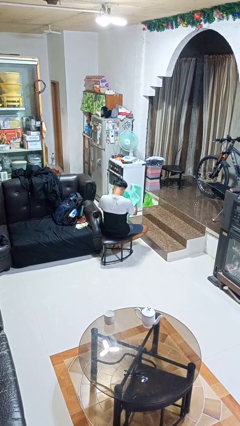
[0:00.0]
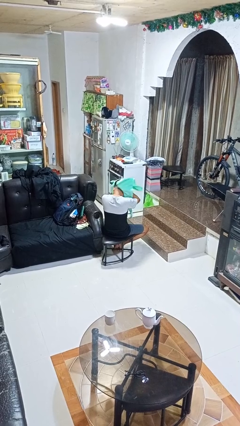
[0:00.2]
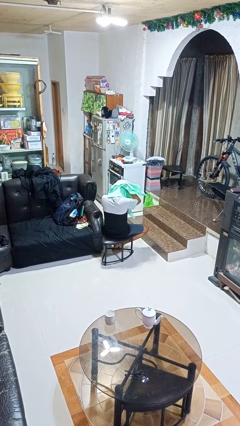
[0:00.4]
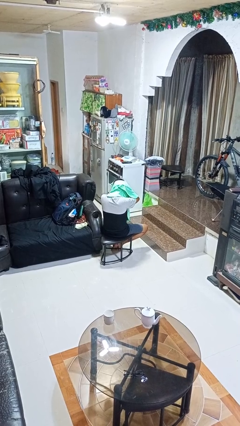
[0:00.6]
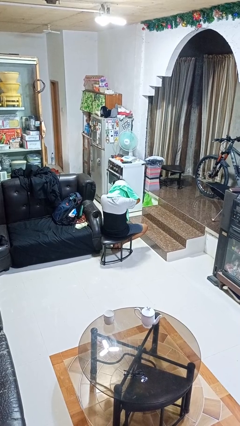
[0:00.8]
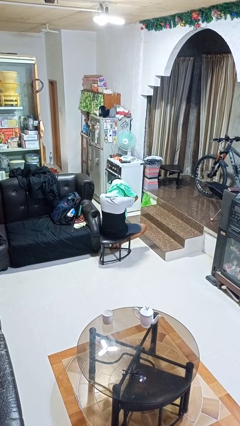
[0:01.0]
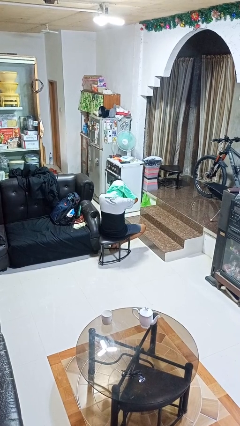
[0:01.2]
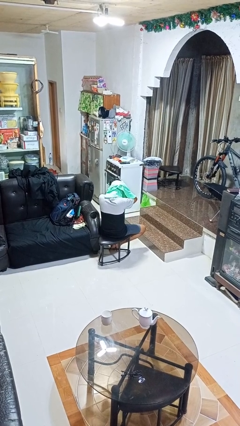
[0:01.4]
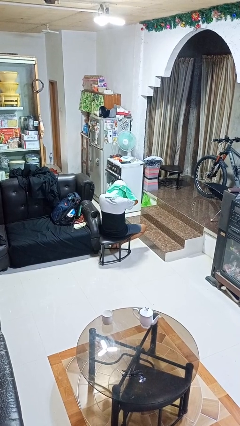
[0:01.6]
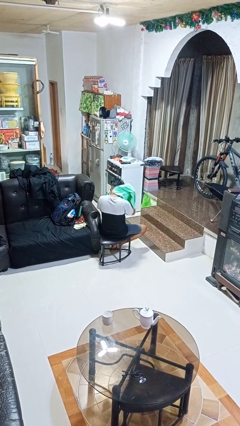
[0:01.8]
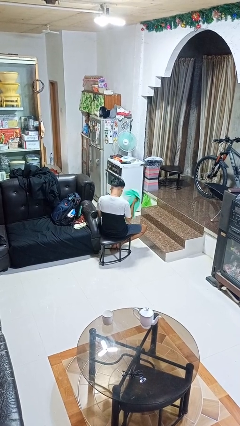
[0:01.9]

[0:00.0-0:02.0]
person dries hair with towel

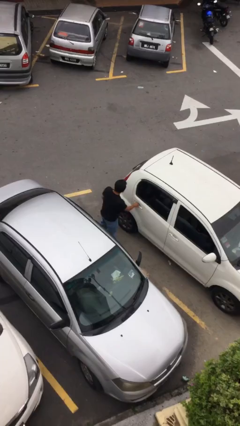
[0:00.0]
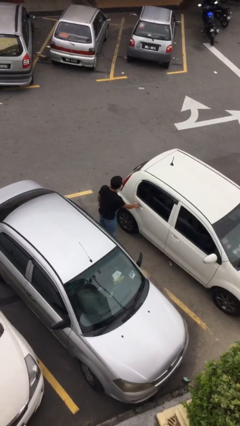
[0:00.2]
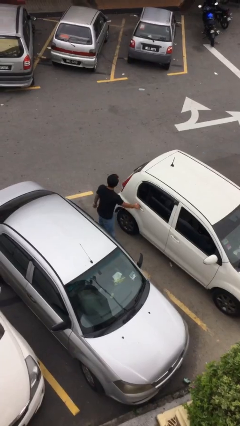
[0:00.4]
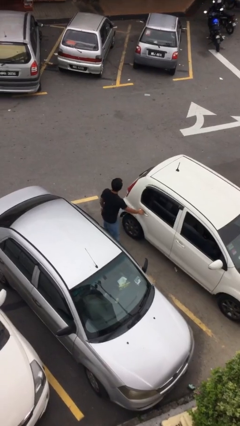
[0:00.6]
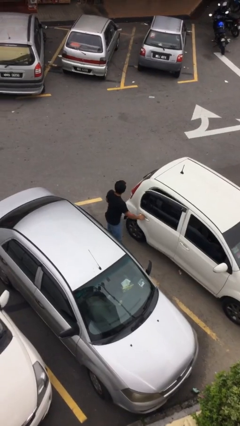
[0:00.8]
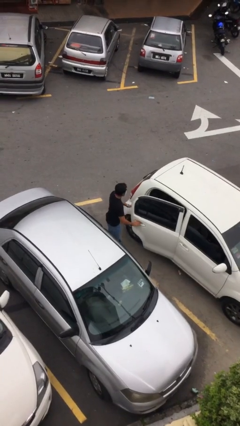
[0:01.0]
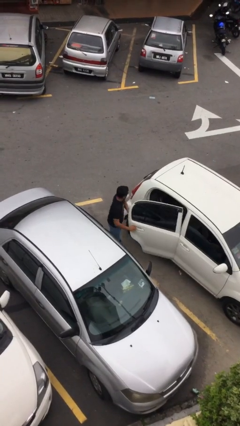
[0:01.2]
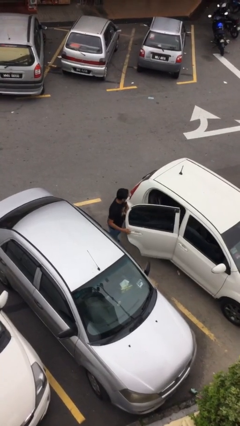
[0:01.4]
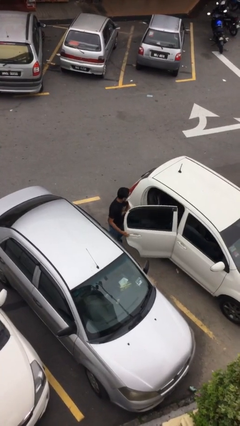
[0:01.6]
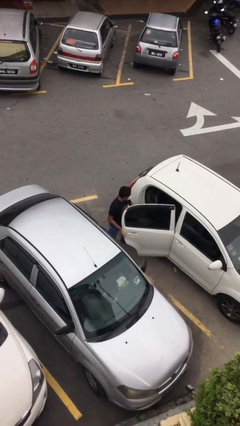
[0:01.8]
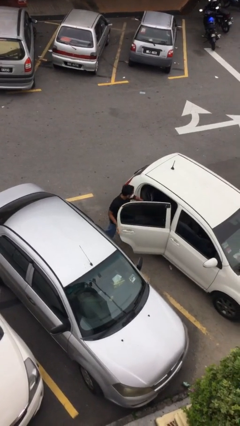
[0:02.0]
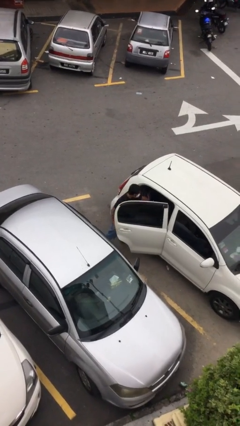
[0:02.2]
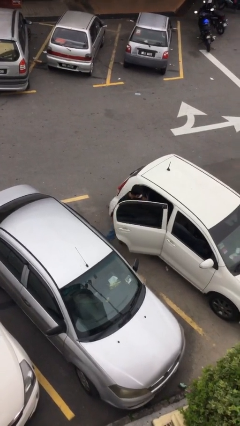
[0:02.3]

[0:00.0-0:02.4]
person opens car door

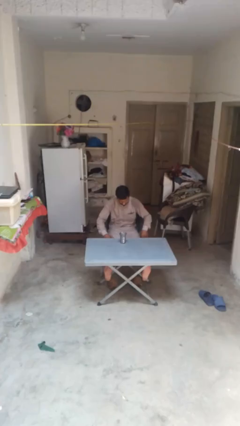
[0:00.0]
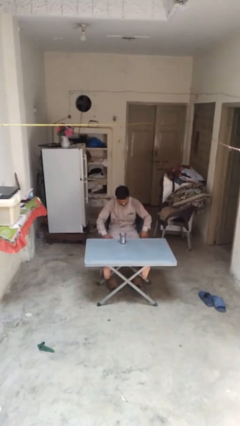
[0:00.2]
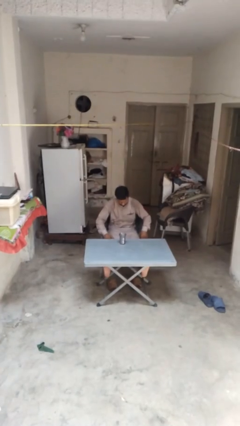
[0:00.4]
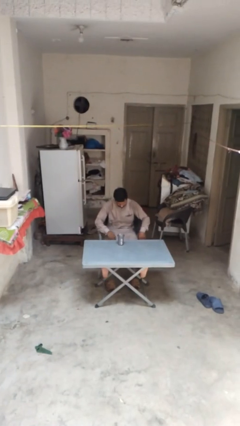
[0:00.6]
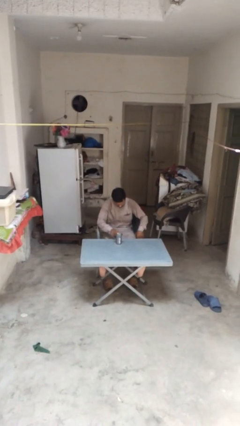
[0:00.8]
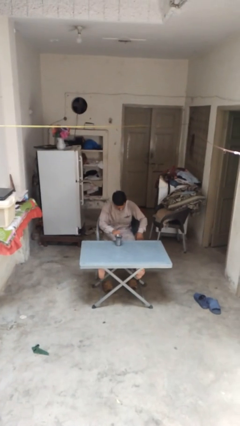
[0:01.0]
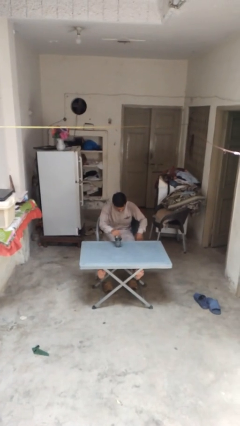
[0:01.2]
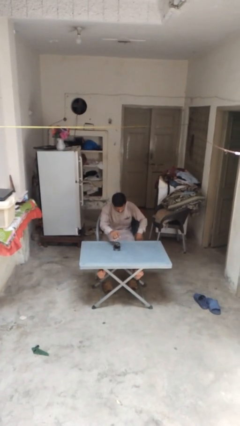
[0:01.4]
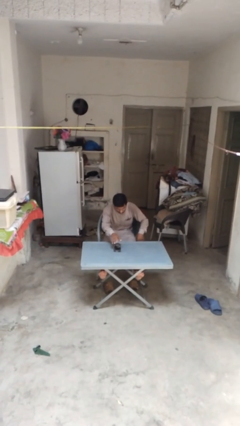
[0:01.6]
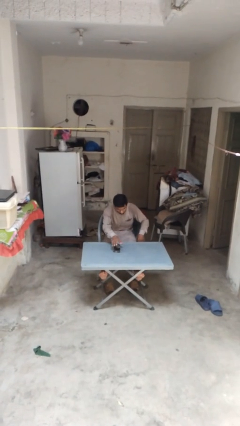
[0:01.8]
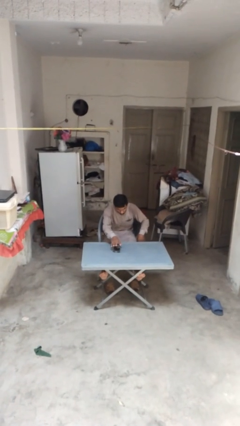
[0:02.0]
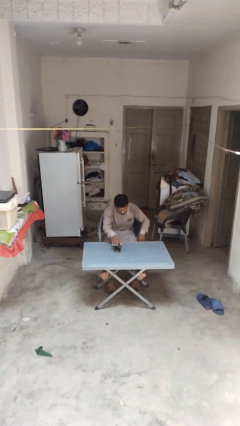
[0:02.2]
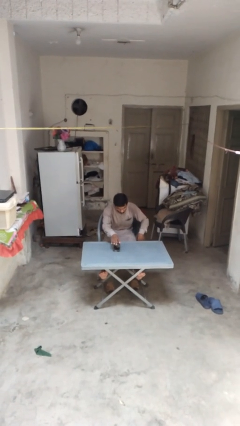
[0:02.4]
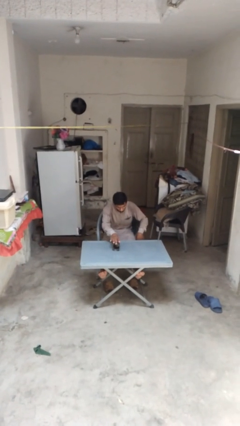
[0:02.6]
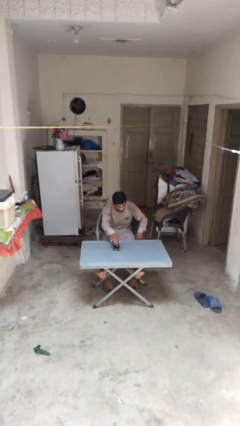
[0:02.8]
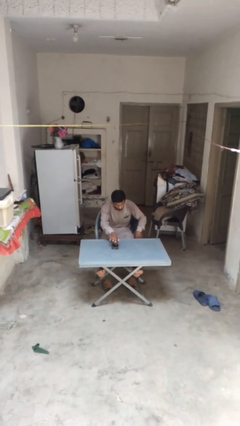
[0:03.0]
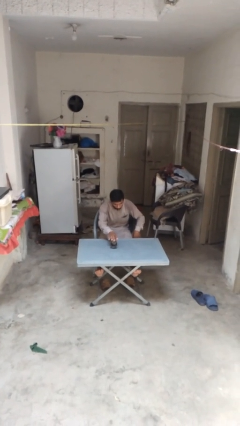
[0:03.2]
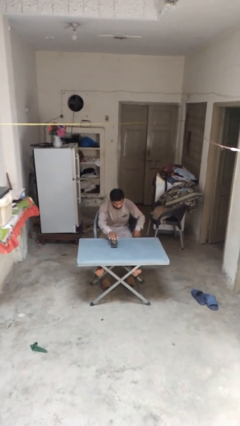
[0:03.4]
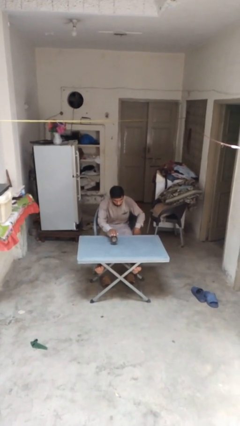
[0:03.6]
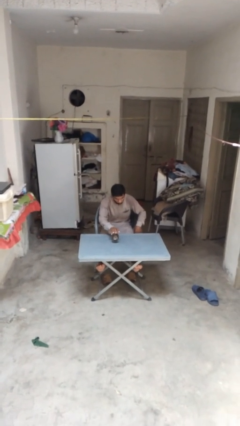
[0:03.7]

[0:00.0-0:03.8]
person knocks over glass

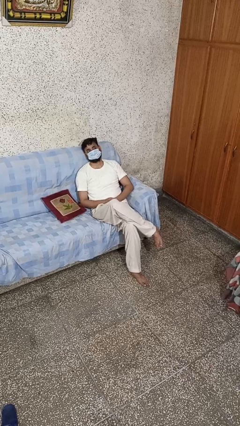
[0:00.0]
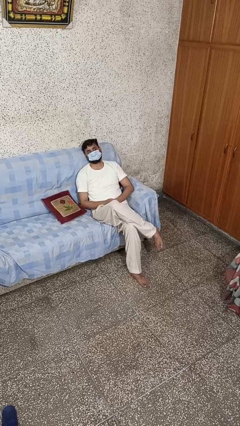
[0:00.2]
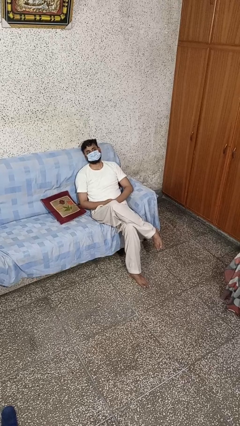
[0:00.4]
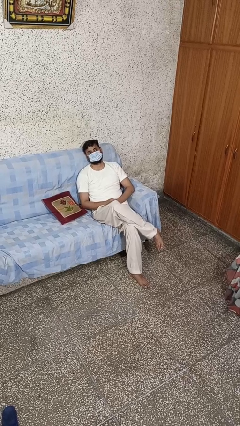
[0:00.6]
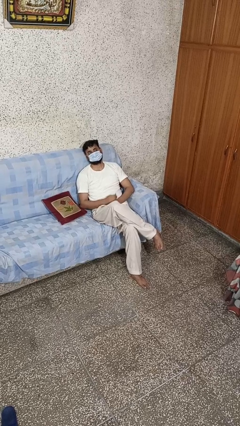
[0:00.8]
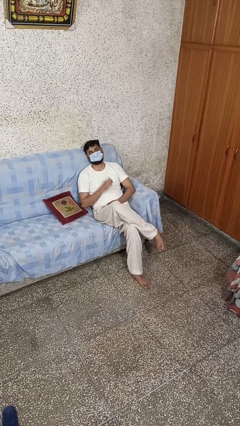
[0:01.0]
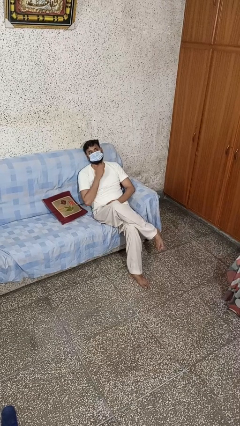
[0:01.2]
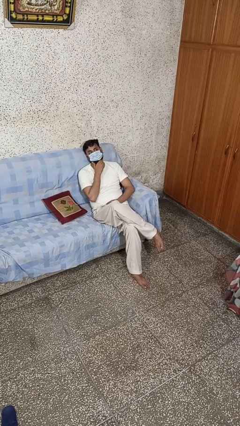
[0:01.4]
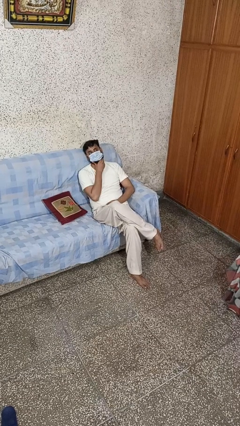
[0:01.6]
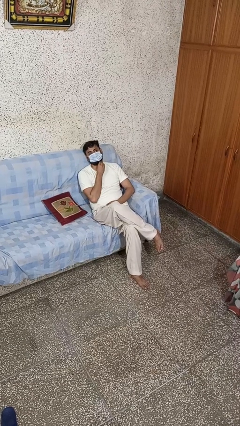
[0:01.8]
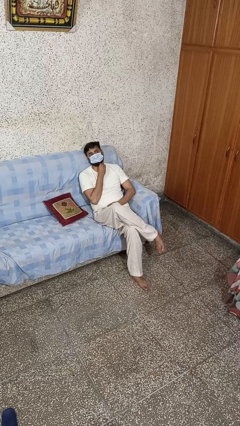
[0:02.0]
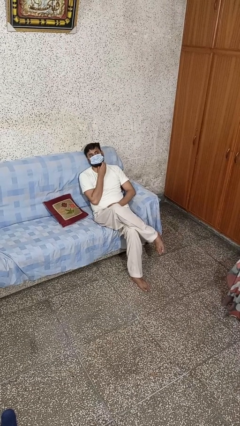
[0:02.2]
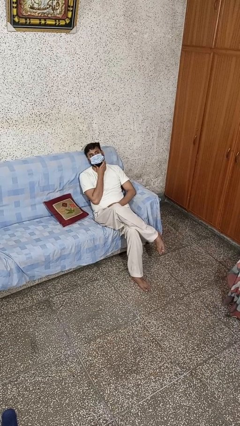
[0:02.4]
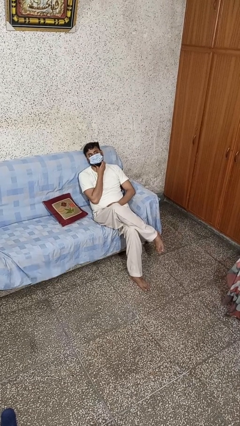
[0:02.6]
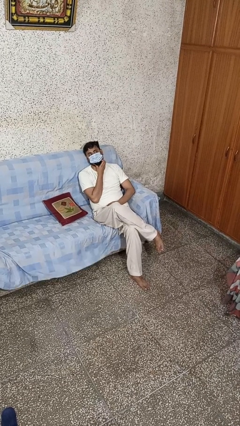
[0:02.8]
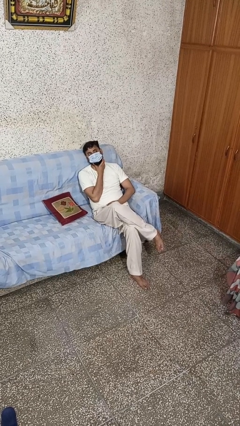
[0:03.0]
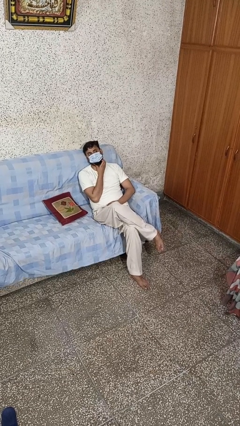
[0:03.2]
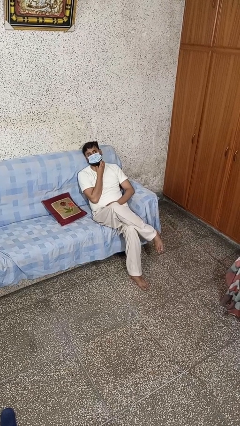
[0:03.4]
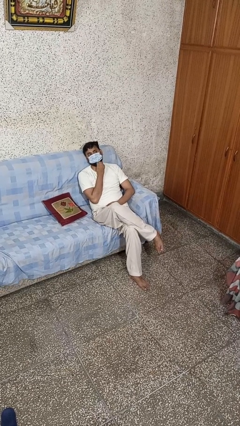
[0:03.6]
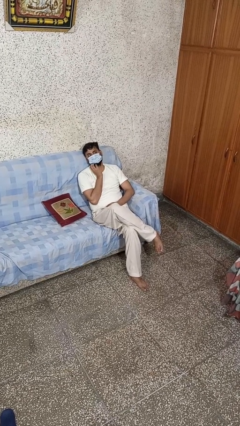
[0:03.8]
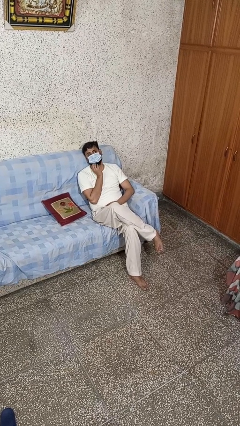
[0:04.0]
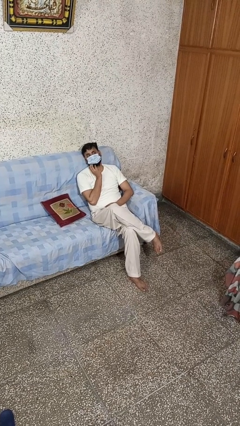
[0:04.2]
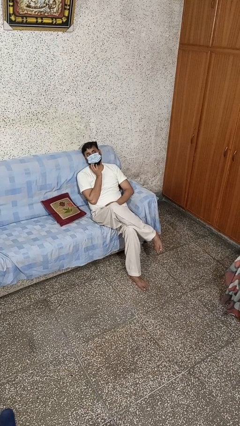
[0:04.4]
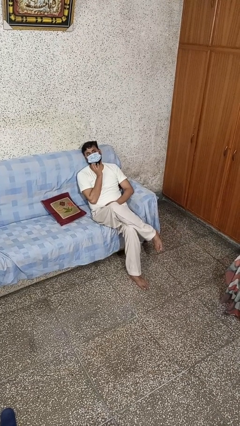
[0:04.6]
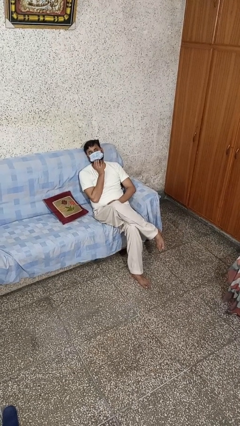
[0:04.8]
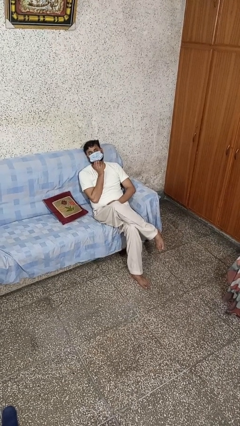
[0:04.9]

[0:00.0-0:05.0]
person strokes chin

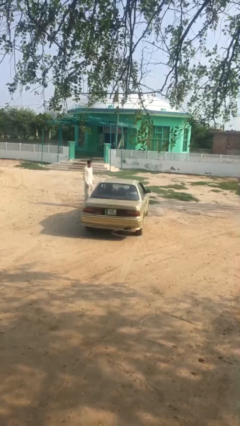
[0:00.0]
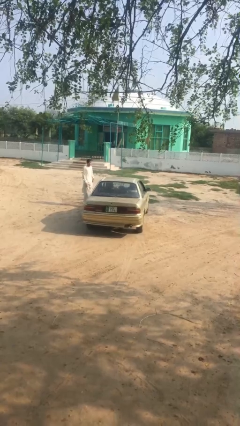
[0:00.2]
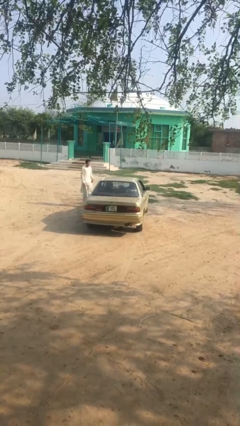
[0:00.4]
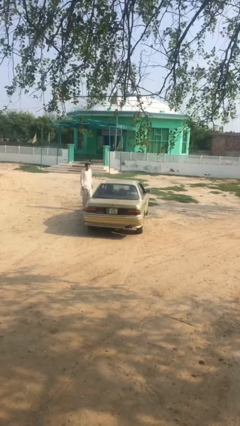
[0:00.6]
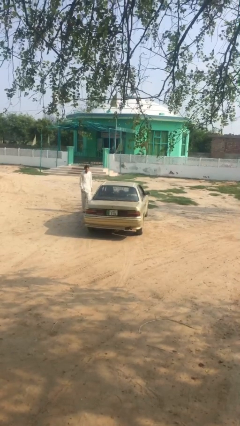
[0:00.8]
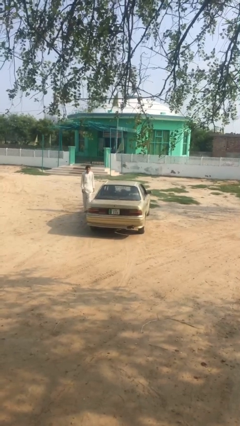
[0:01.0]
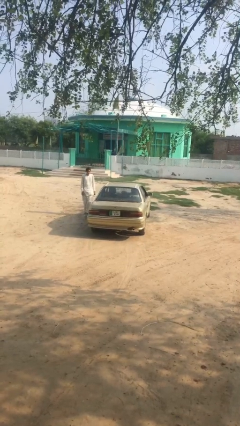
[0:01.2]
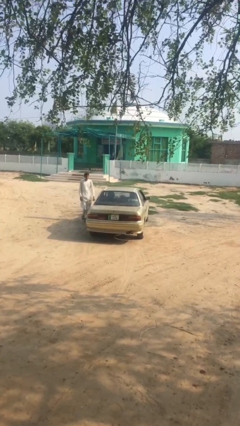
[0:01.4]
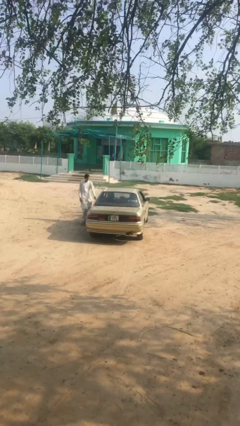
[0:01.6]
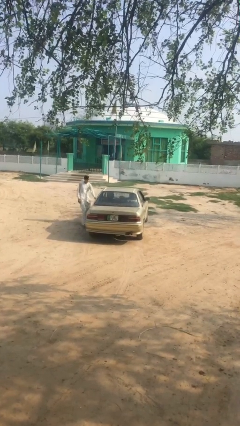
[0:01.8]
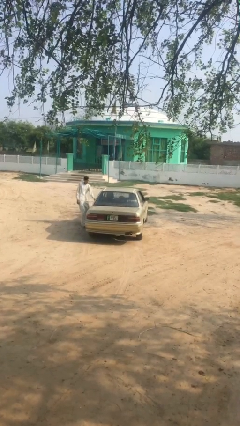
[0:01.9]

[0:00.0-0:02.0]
car picks up person

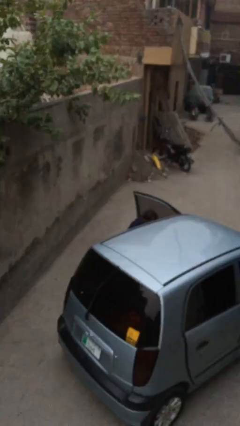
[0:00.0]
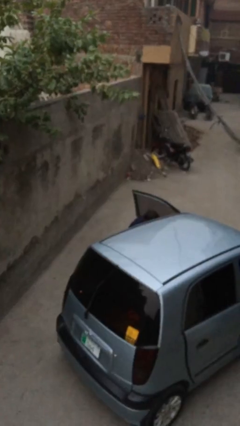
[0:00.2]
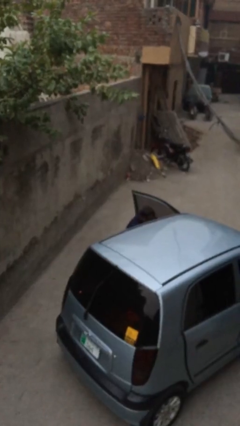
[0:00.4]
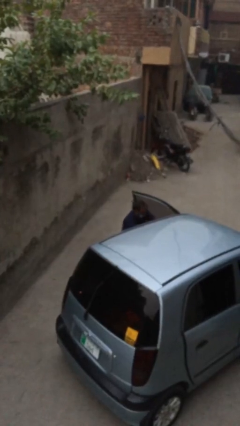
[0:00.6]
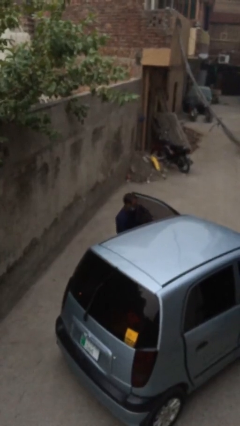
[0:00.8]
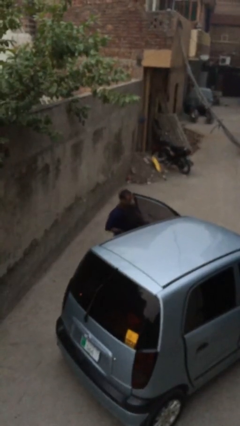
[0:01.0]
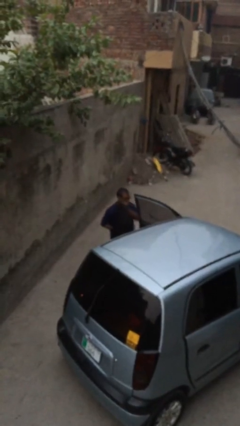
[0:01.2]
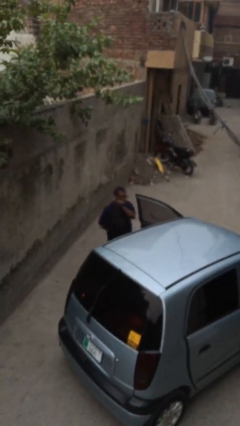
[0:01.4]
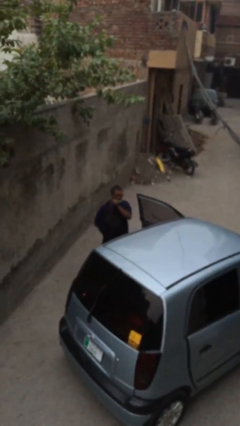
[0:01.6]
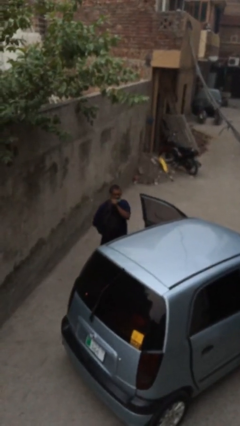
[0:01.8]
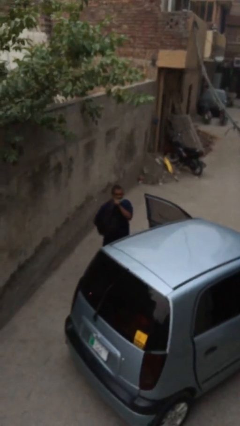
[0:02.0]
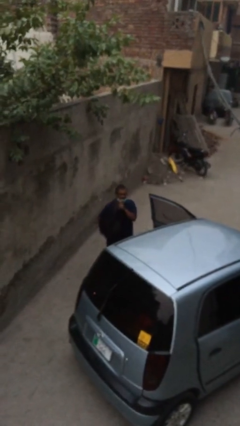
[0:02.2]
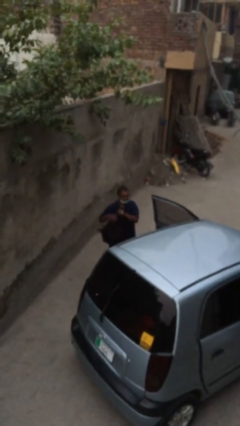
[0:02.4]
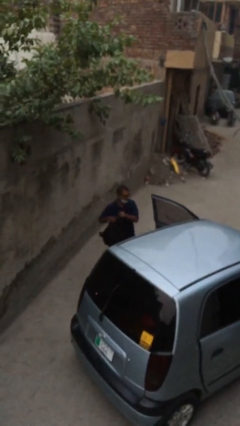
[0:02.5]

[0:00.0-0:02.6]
person unloads car
